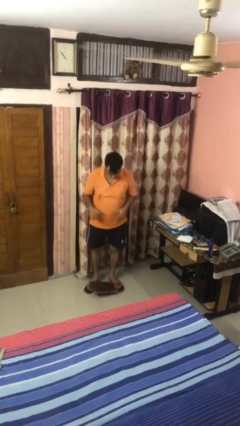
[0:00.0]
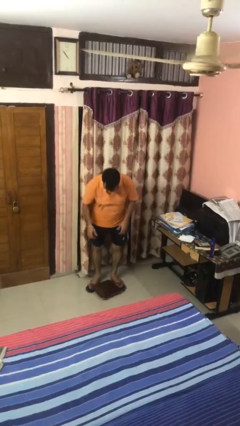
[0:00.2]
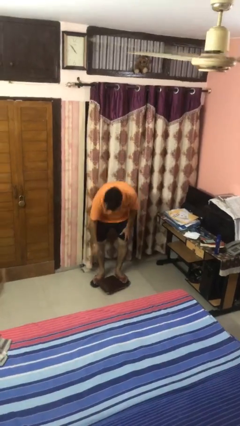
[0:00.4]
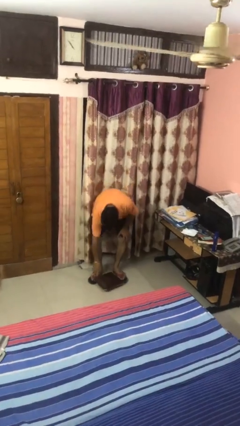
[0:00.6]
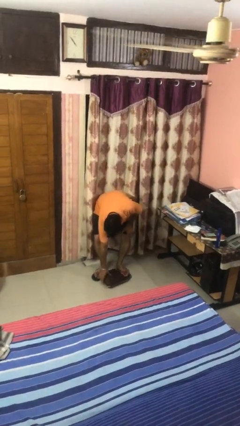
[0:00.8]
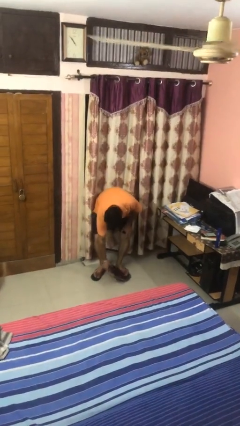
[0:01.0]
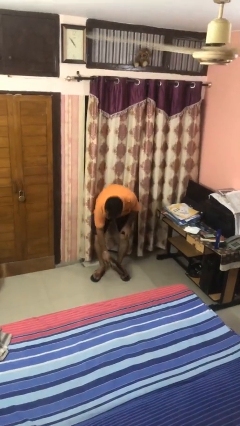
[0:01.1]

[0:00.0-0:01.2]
person picks up object from floor

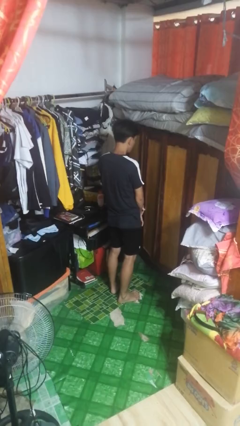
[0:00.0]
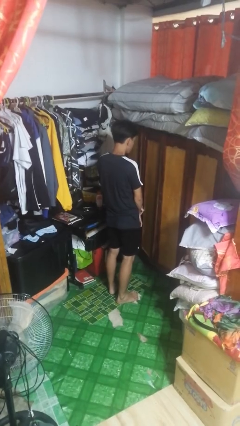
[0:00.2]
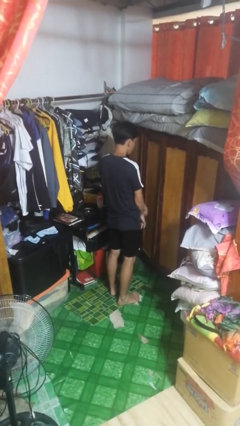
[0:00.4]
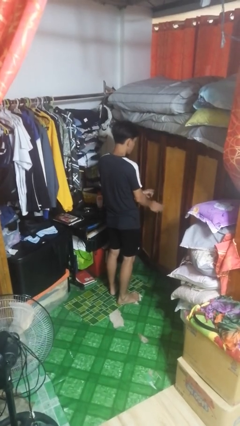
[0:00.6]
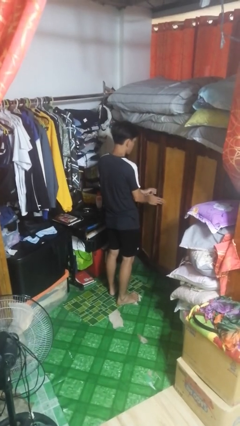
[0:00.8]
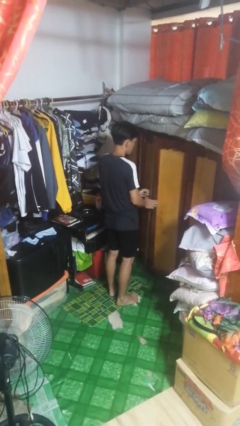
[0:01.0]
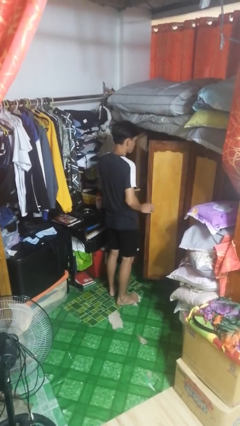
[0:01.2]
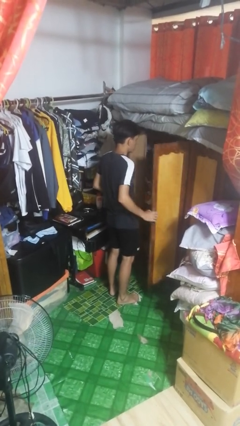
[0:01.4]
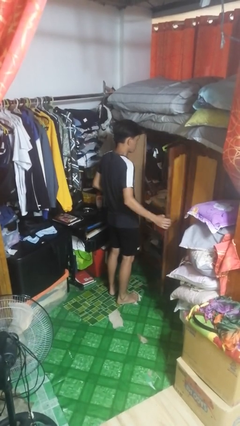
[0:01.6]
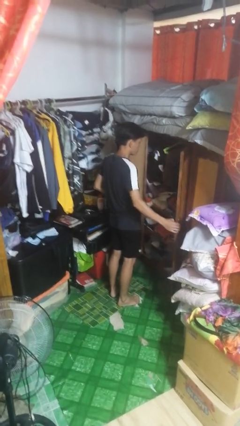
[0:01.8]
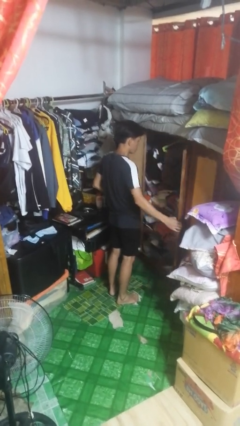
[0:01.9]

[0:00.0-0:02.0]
person opens dresser drawer

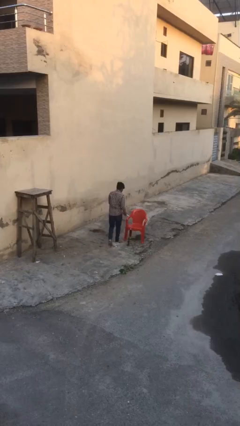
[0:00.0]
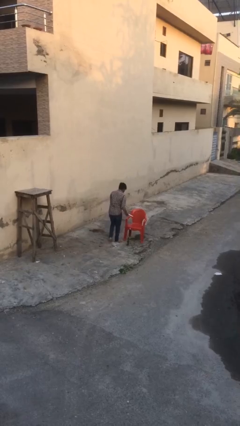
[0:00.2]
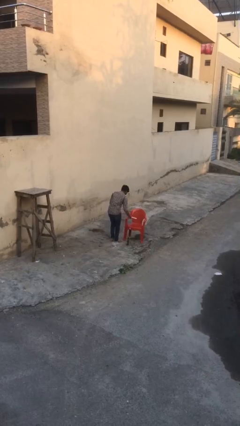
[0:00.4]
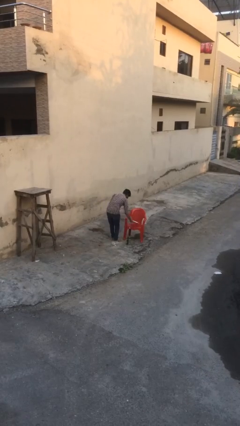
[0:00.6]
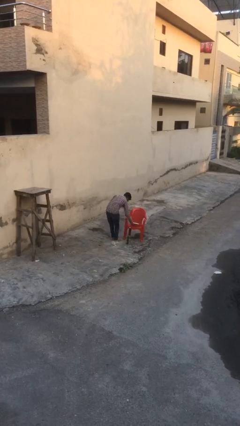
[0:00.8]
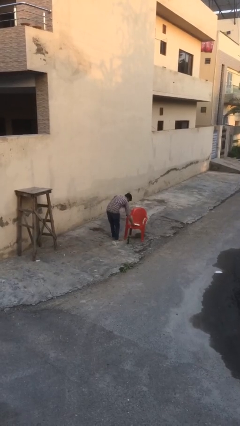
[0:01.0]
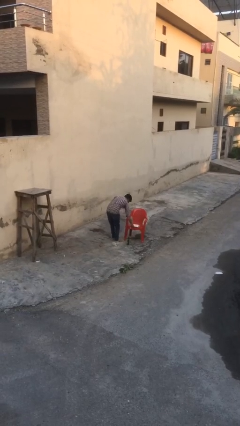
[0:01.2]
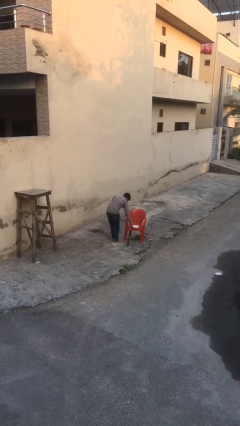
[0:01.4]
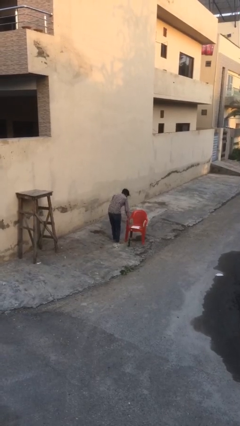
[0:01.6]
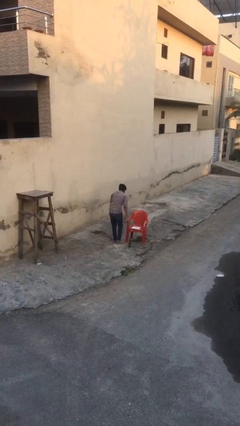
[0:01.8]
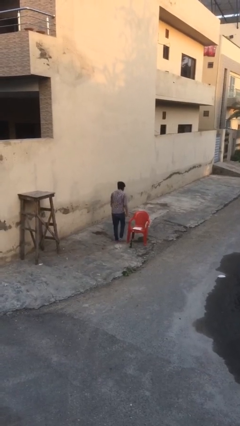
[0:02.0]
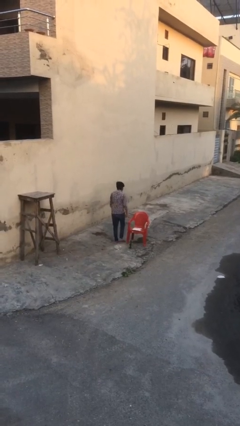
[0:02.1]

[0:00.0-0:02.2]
person puts down object on table

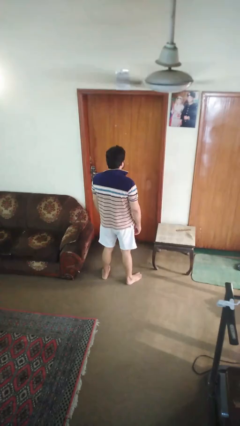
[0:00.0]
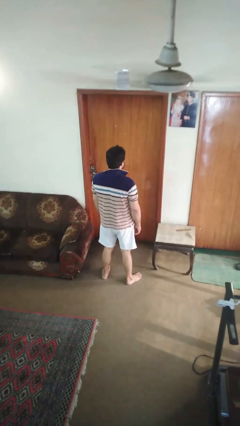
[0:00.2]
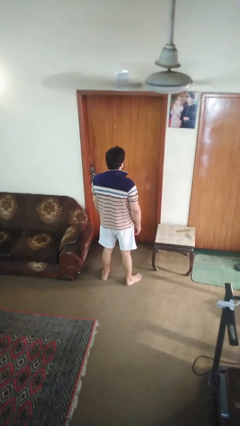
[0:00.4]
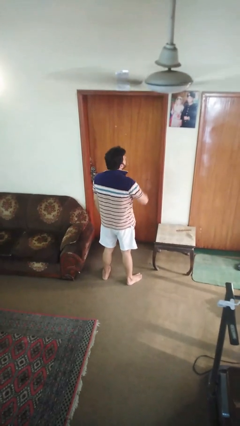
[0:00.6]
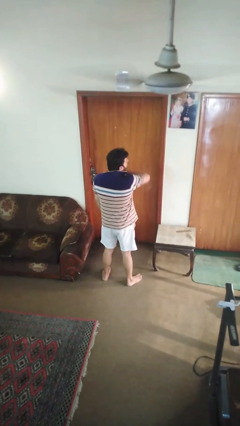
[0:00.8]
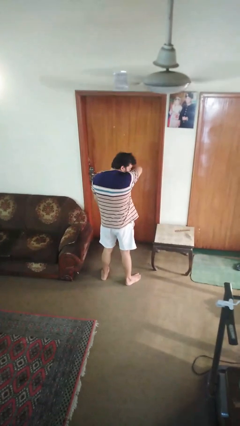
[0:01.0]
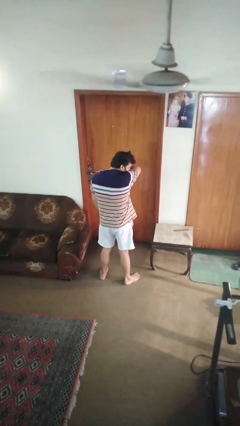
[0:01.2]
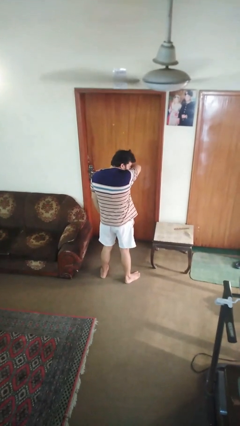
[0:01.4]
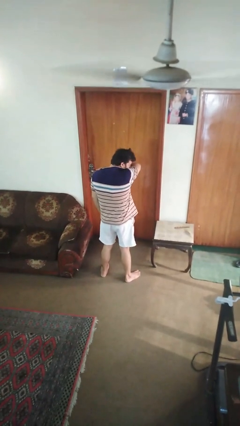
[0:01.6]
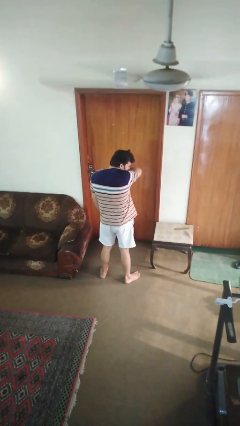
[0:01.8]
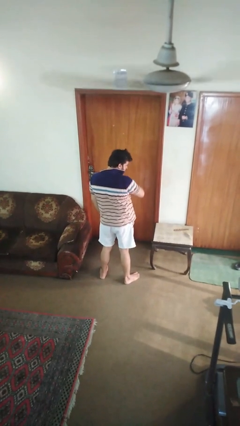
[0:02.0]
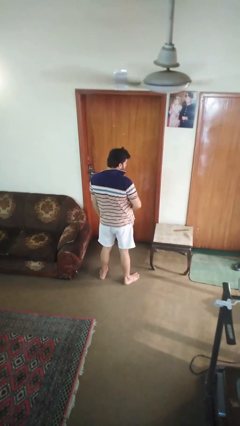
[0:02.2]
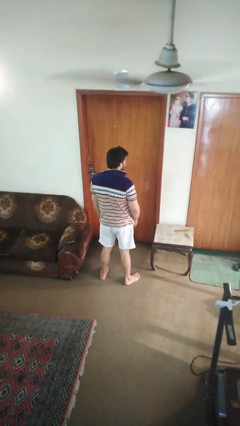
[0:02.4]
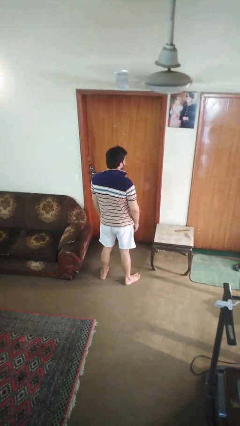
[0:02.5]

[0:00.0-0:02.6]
person sneezes into arm

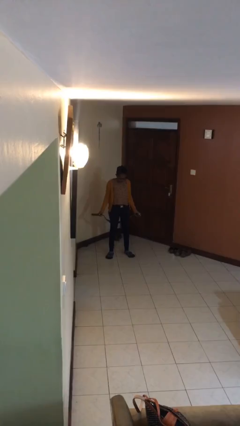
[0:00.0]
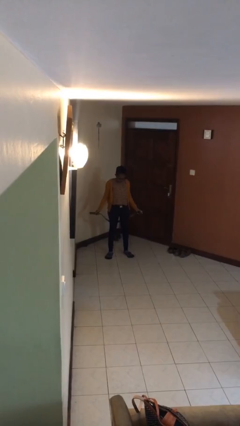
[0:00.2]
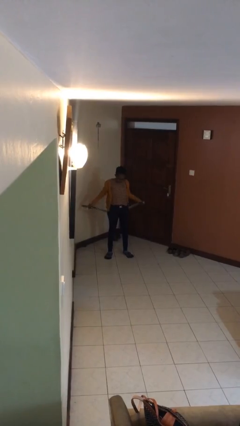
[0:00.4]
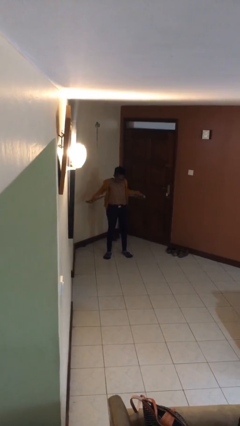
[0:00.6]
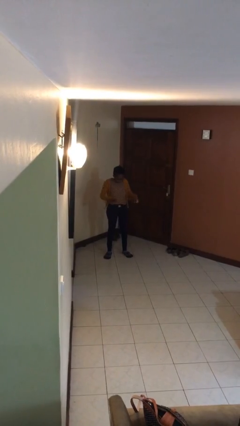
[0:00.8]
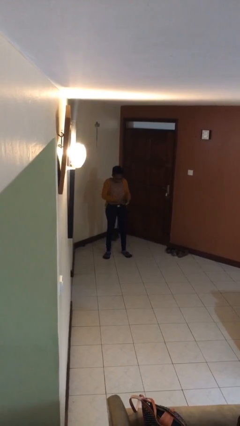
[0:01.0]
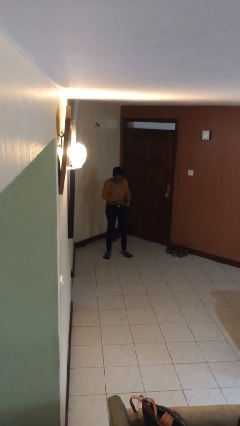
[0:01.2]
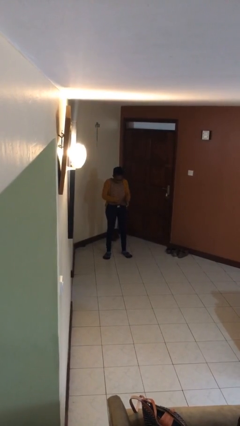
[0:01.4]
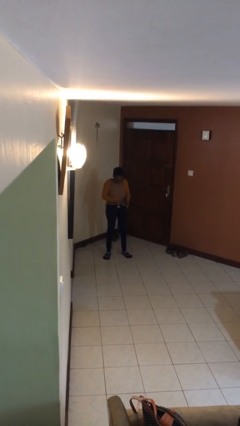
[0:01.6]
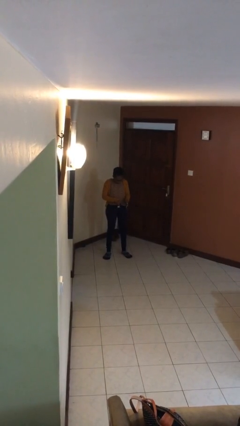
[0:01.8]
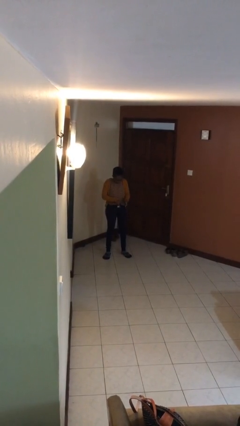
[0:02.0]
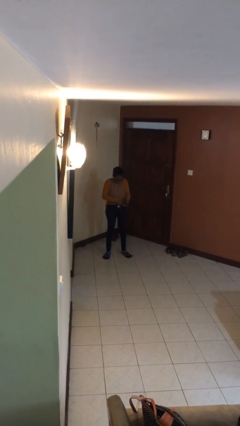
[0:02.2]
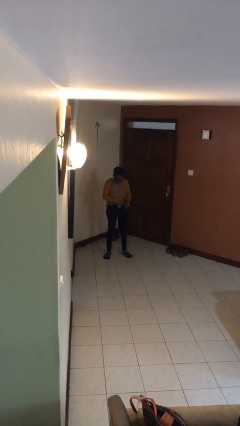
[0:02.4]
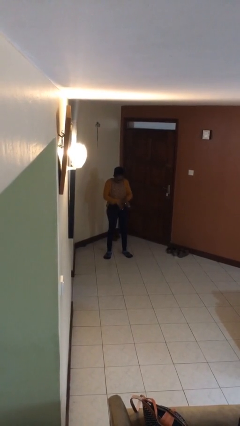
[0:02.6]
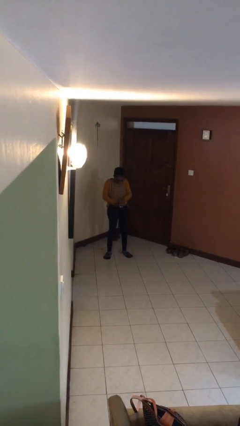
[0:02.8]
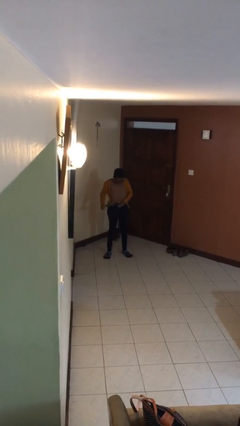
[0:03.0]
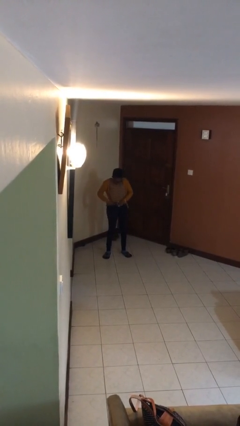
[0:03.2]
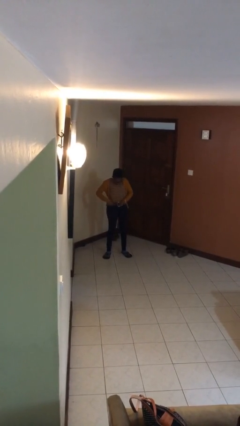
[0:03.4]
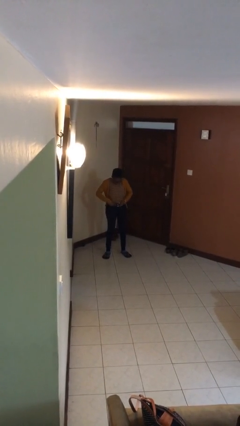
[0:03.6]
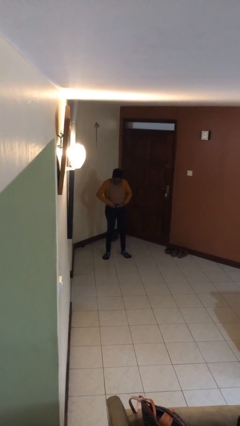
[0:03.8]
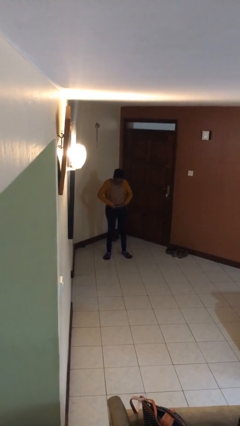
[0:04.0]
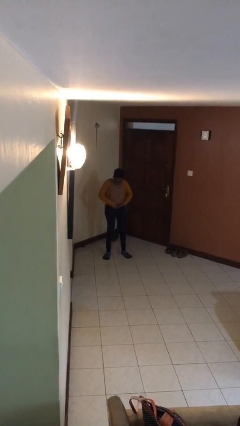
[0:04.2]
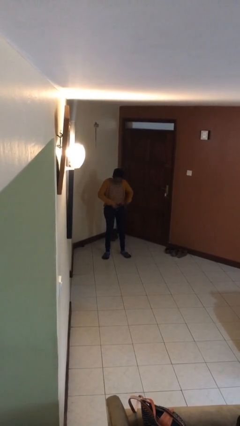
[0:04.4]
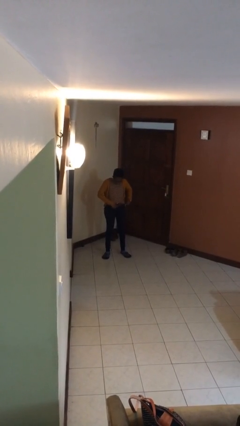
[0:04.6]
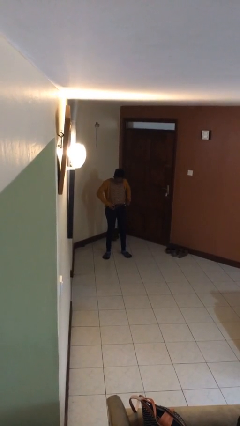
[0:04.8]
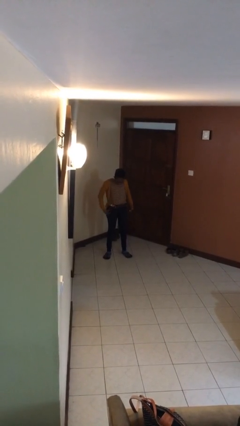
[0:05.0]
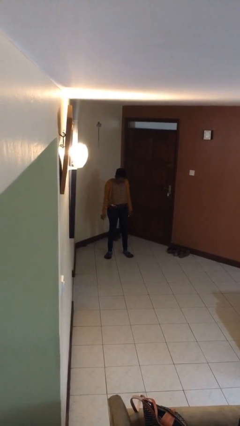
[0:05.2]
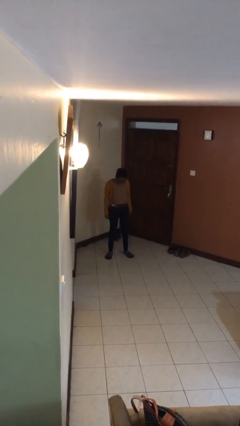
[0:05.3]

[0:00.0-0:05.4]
person puts on belt

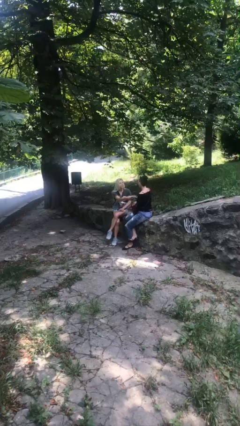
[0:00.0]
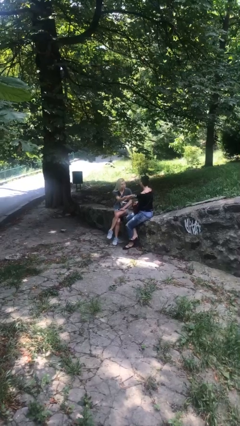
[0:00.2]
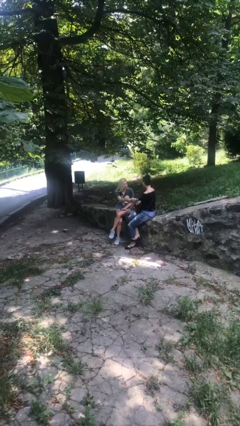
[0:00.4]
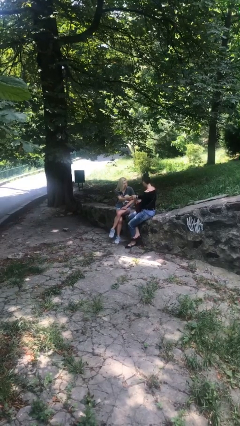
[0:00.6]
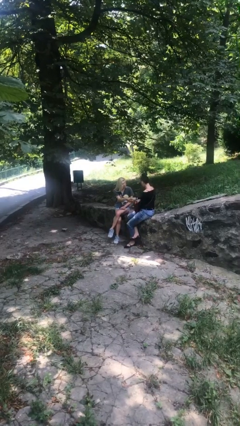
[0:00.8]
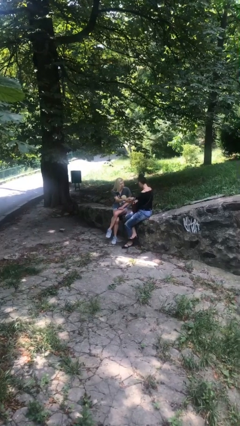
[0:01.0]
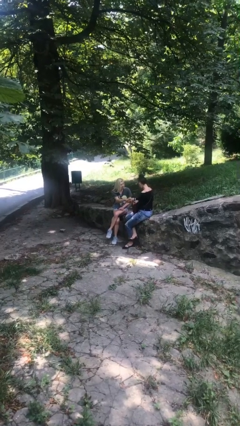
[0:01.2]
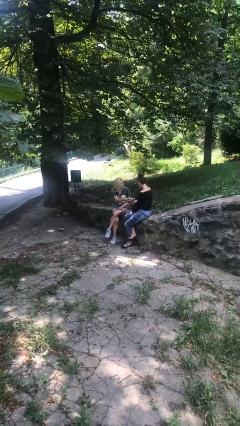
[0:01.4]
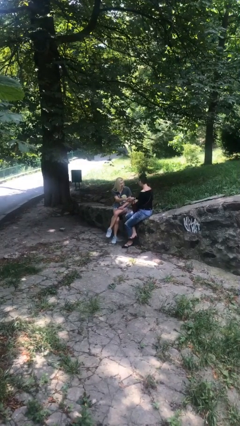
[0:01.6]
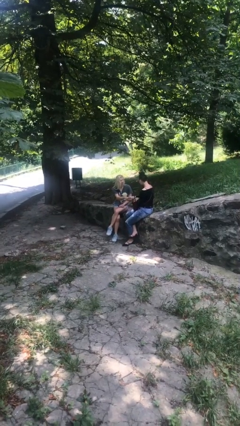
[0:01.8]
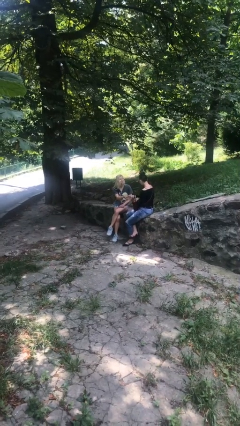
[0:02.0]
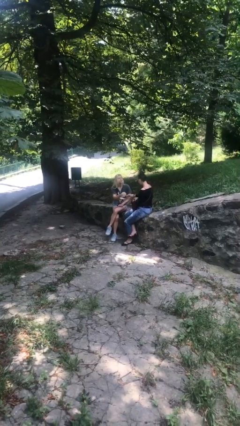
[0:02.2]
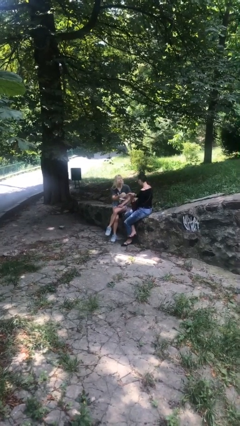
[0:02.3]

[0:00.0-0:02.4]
person shakes hand

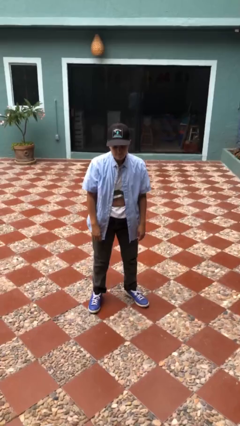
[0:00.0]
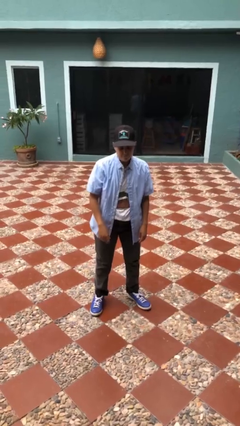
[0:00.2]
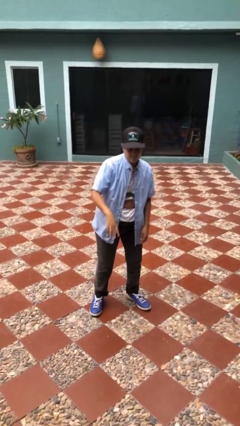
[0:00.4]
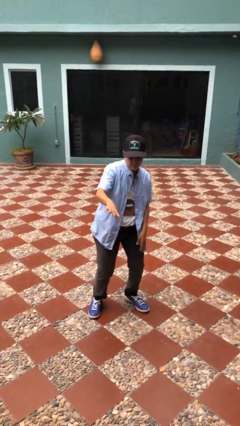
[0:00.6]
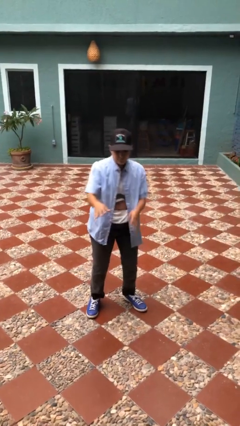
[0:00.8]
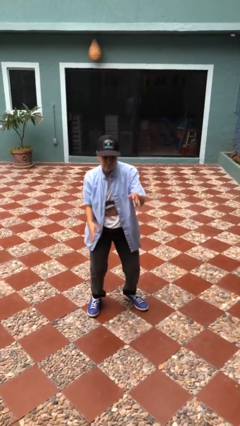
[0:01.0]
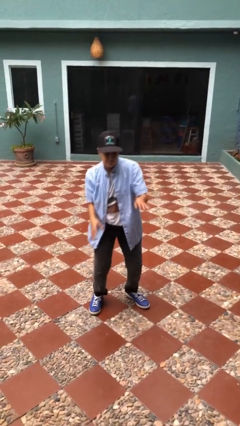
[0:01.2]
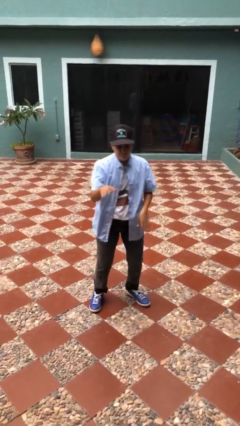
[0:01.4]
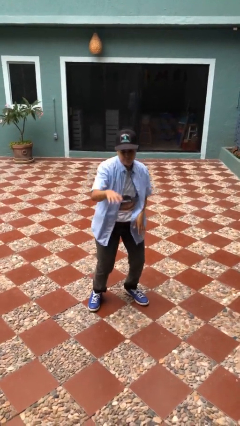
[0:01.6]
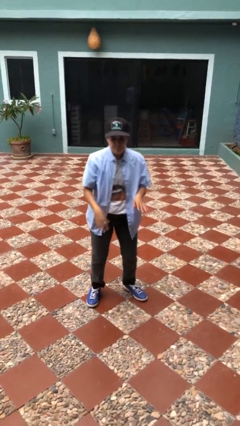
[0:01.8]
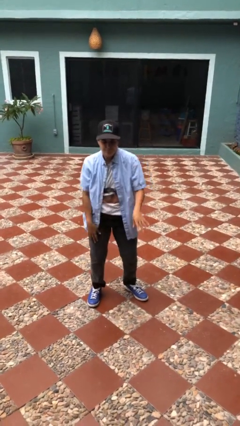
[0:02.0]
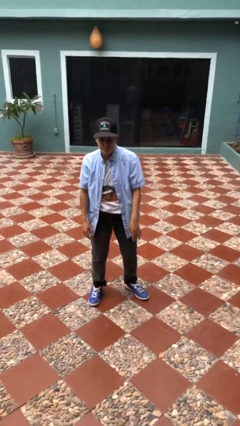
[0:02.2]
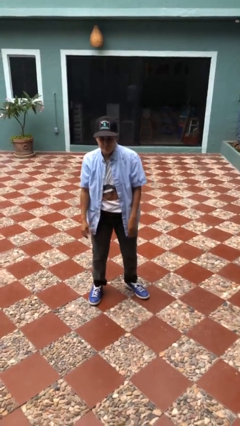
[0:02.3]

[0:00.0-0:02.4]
person dances in place
